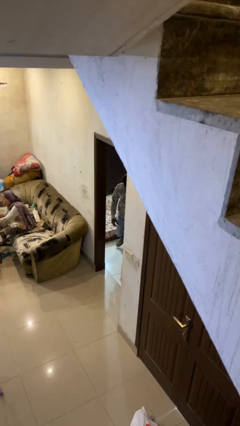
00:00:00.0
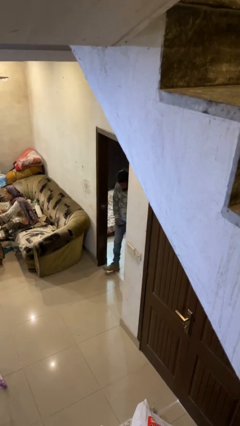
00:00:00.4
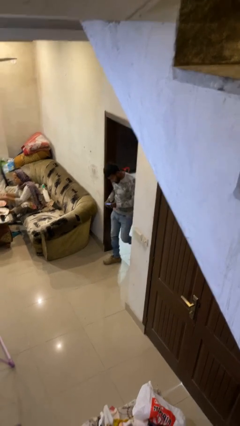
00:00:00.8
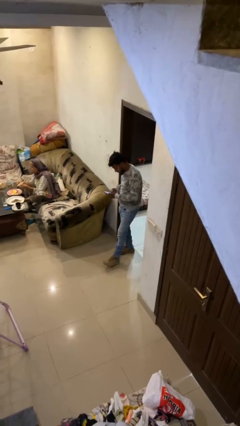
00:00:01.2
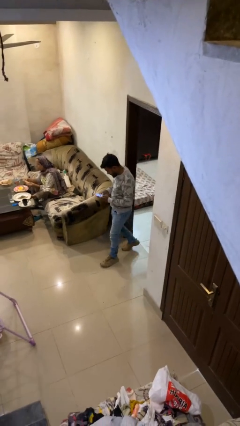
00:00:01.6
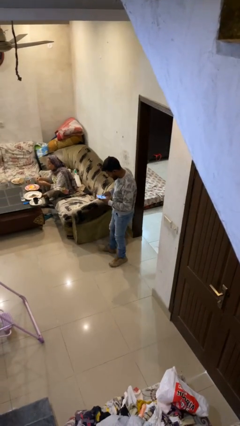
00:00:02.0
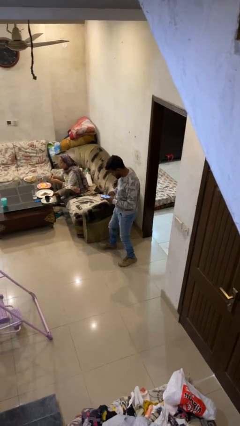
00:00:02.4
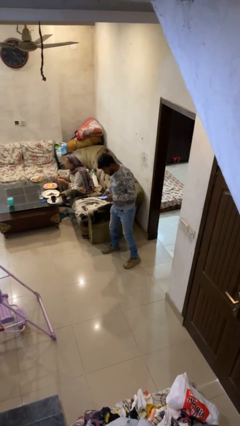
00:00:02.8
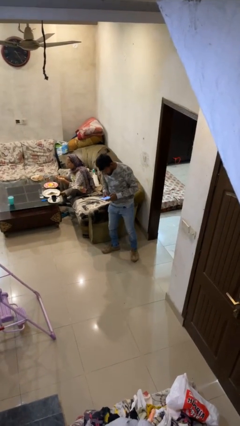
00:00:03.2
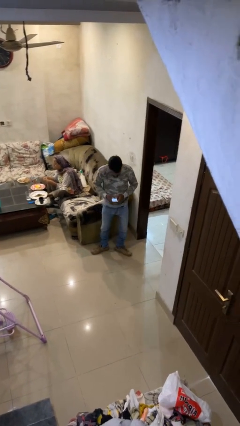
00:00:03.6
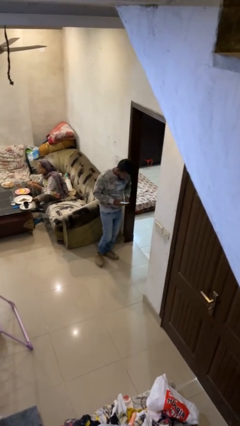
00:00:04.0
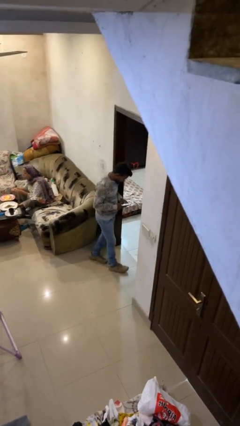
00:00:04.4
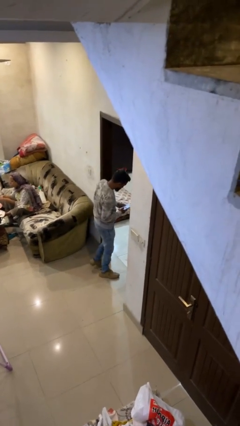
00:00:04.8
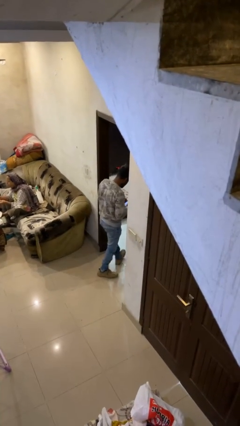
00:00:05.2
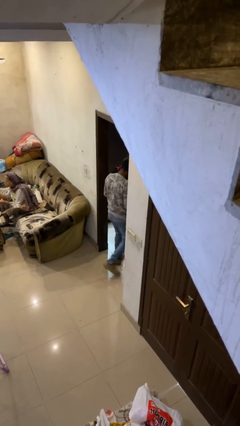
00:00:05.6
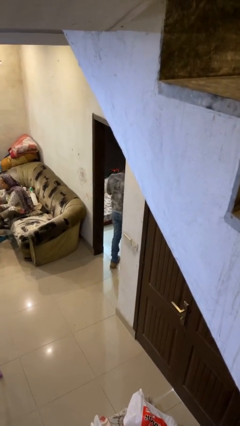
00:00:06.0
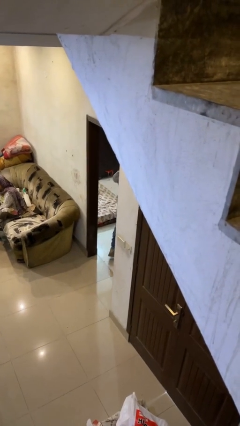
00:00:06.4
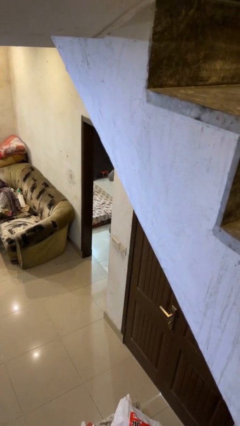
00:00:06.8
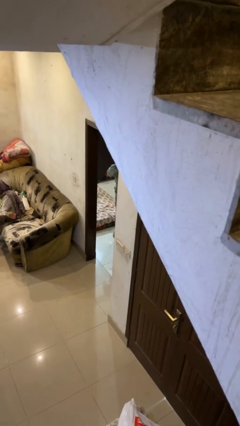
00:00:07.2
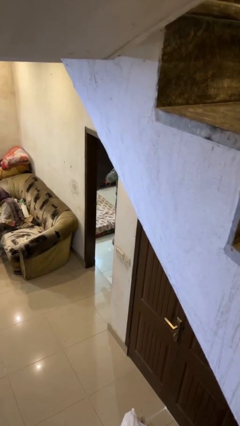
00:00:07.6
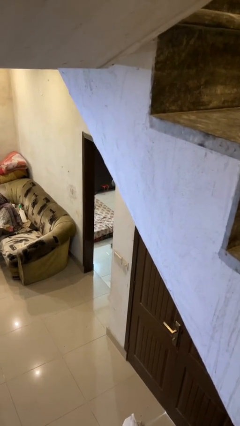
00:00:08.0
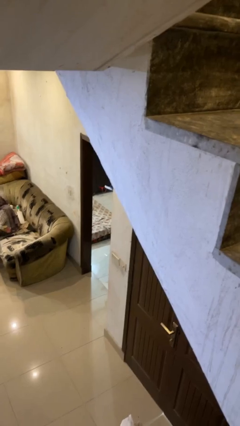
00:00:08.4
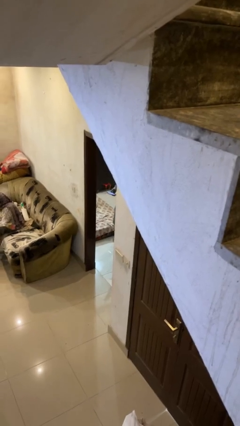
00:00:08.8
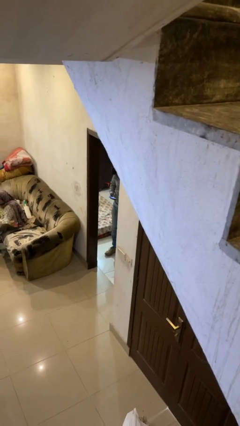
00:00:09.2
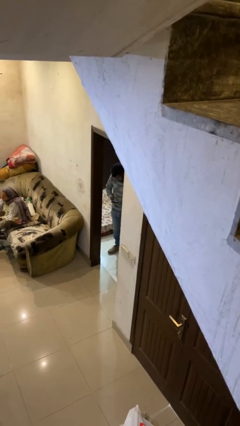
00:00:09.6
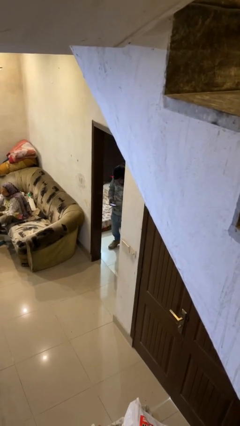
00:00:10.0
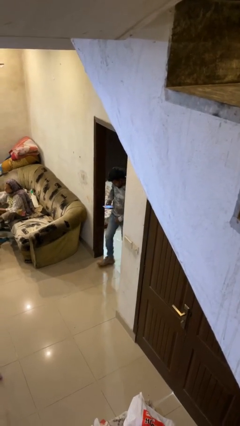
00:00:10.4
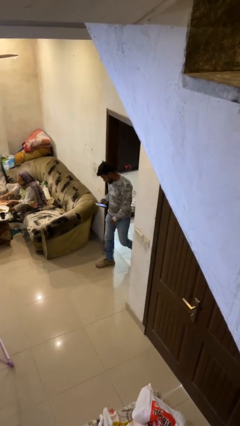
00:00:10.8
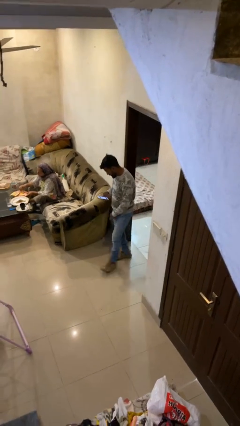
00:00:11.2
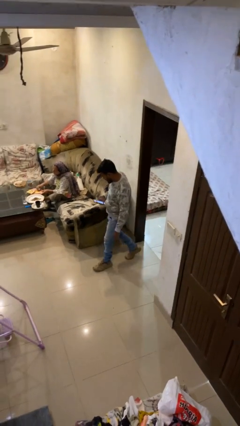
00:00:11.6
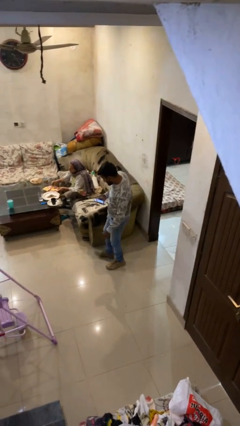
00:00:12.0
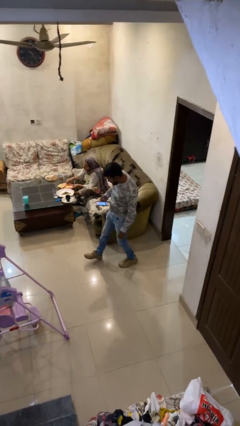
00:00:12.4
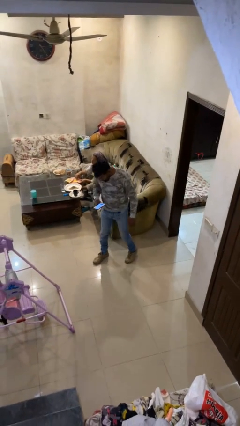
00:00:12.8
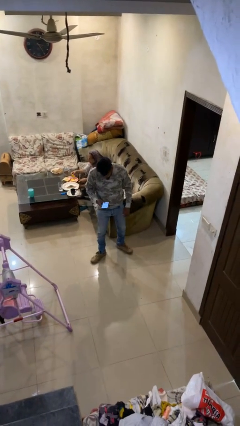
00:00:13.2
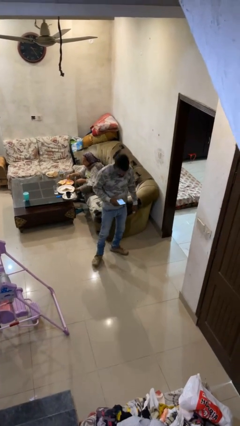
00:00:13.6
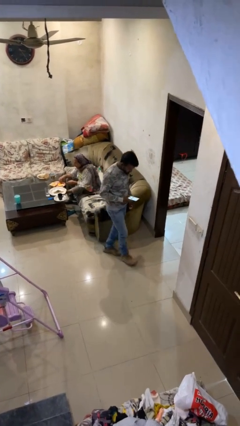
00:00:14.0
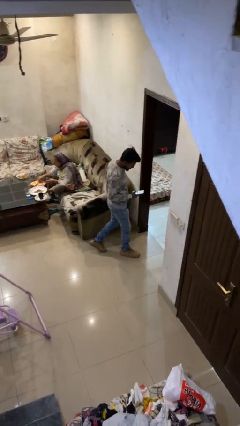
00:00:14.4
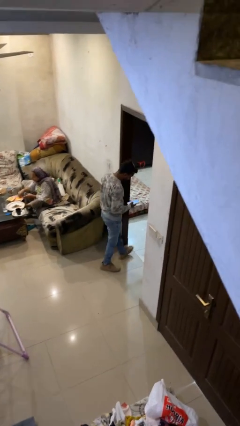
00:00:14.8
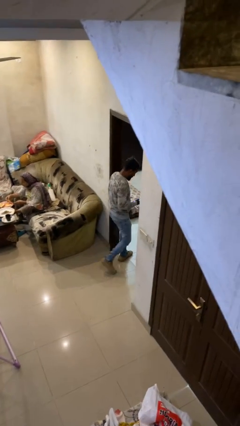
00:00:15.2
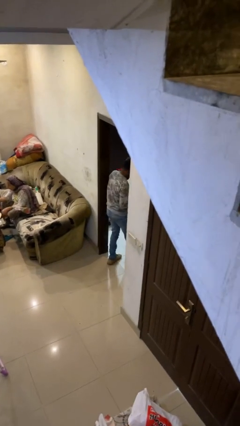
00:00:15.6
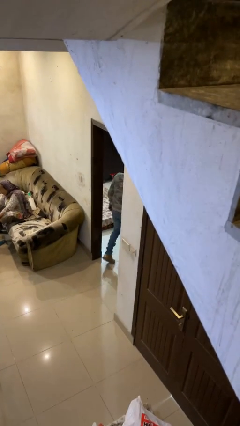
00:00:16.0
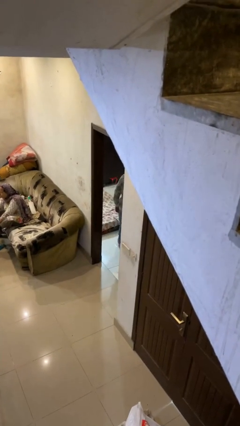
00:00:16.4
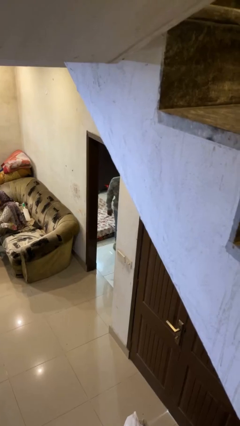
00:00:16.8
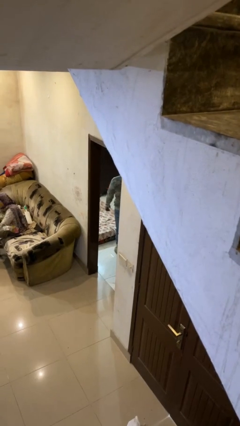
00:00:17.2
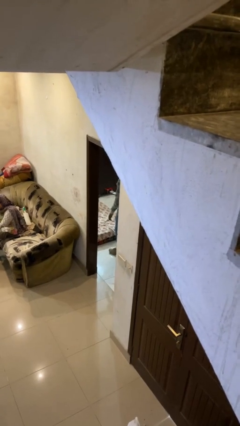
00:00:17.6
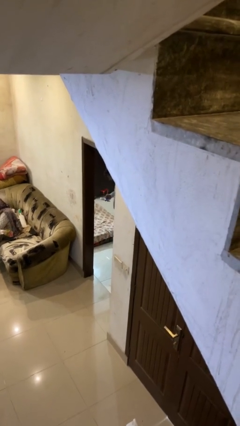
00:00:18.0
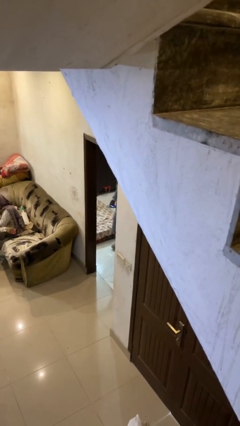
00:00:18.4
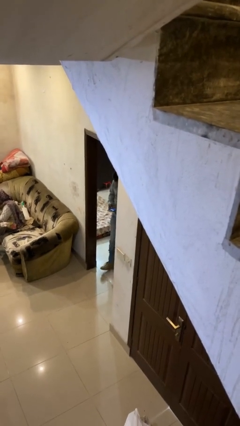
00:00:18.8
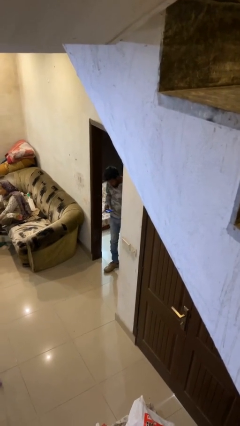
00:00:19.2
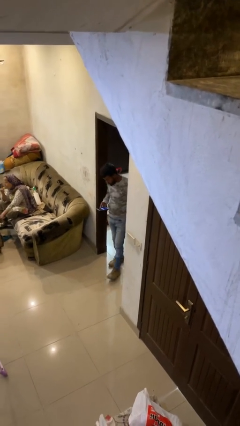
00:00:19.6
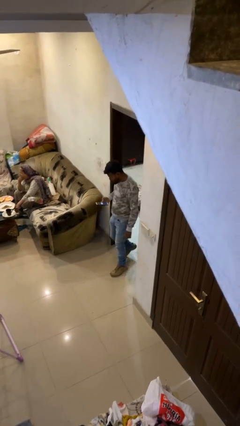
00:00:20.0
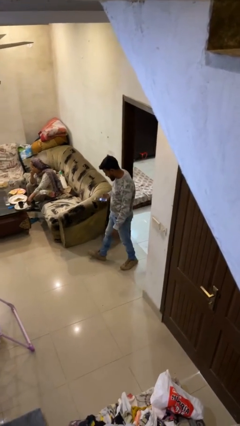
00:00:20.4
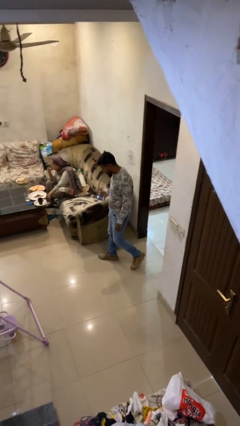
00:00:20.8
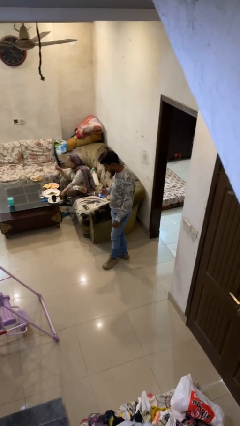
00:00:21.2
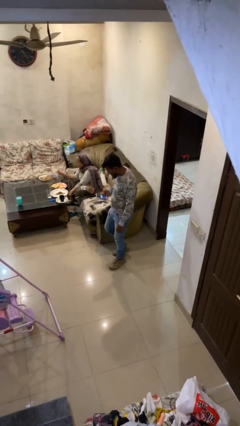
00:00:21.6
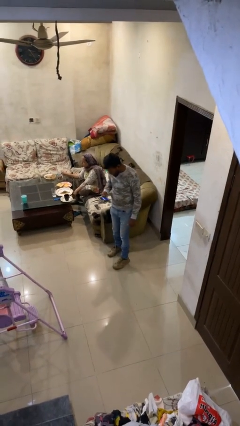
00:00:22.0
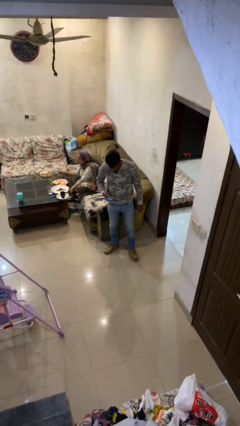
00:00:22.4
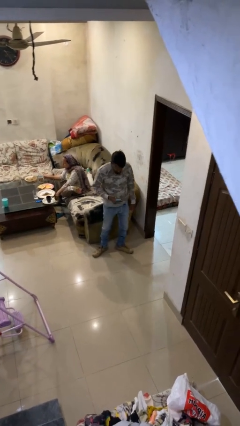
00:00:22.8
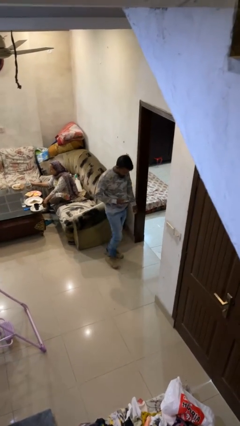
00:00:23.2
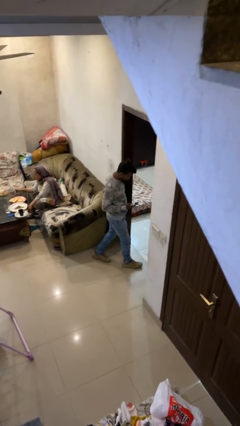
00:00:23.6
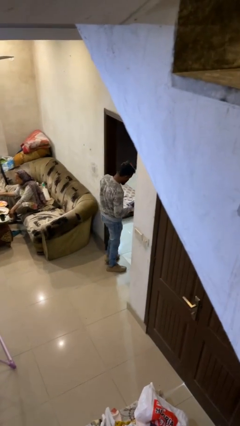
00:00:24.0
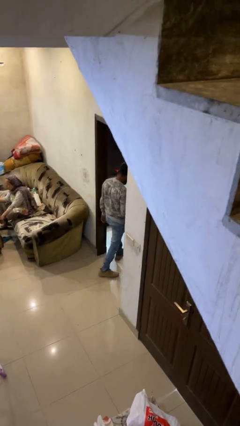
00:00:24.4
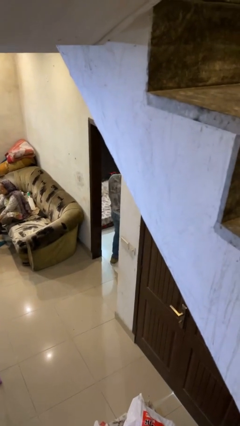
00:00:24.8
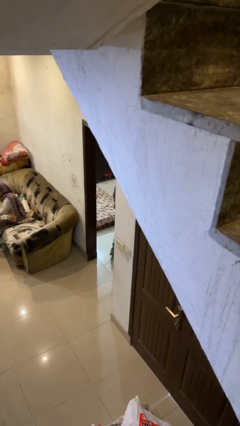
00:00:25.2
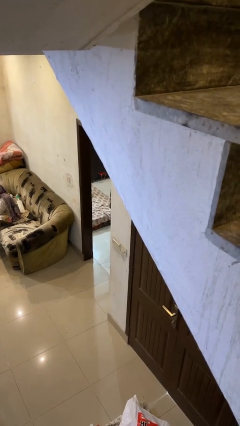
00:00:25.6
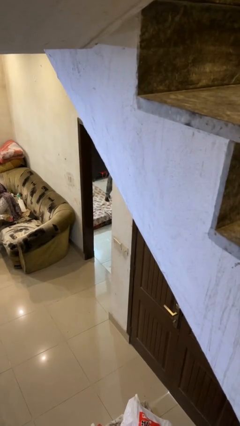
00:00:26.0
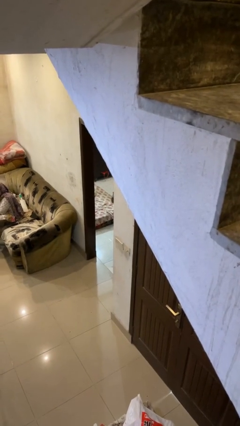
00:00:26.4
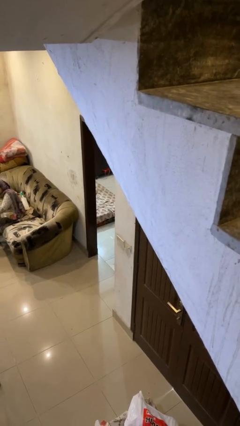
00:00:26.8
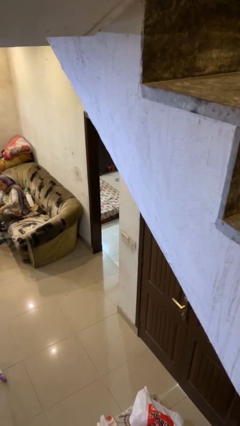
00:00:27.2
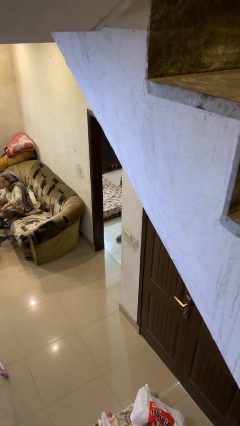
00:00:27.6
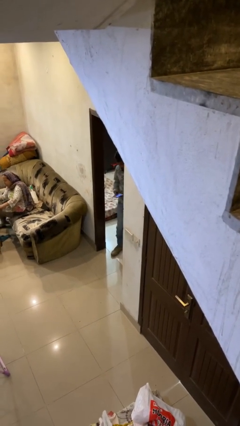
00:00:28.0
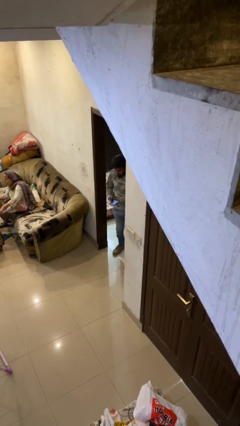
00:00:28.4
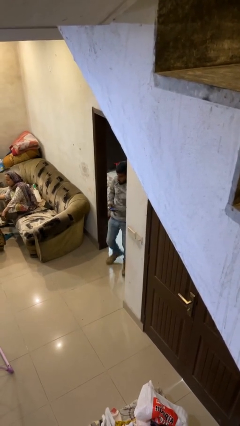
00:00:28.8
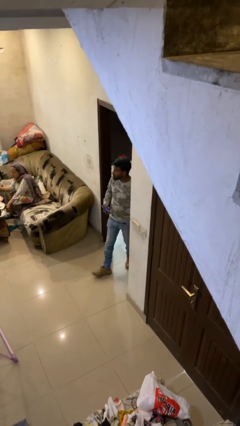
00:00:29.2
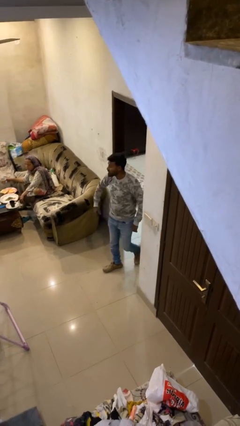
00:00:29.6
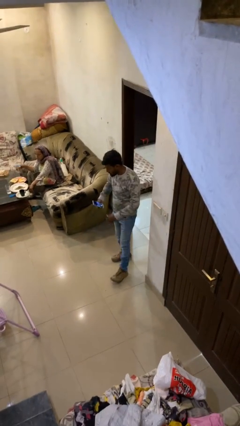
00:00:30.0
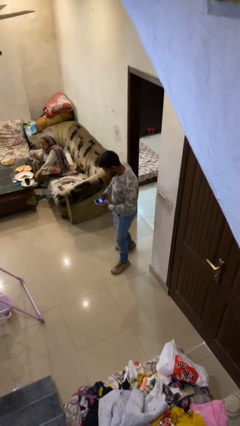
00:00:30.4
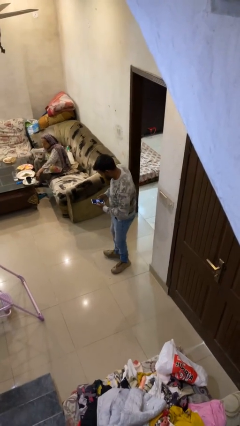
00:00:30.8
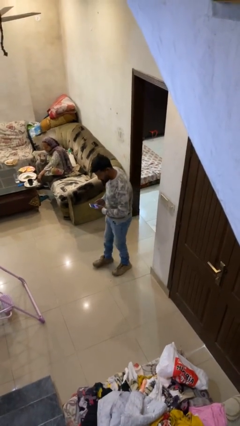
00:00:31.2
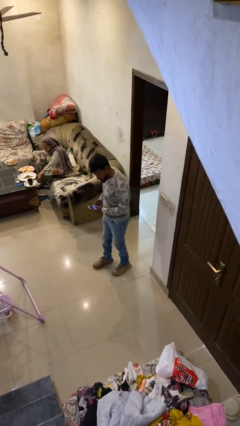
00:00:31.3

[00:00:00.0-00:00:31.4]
person texts on phone

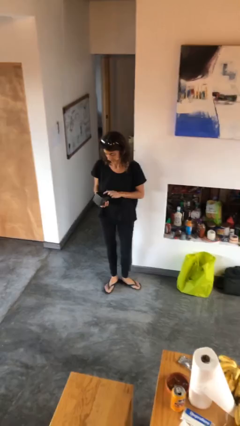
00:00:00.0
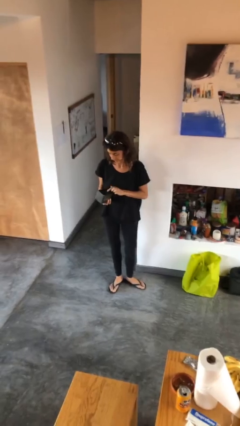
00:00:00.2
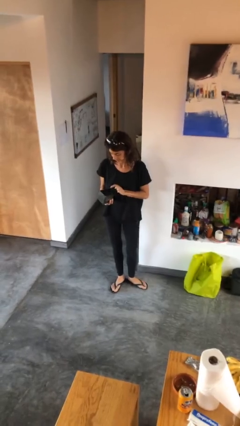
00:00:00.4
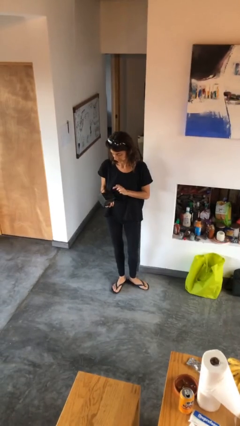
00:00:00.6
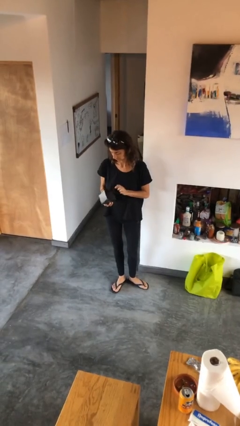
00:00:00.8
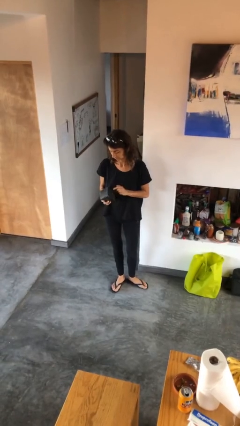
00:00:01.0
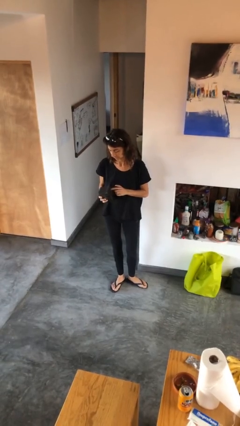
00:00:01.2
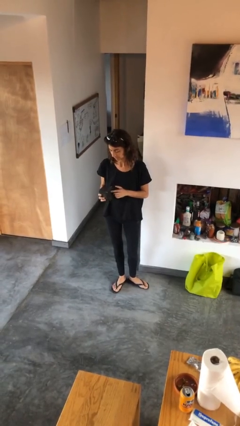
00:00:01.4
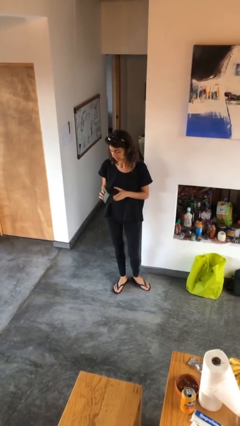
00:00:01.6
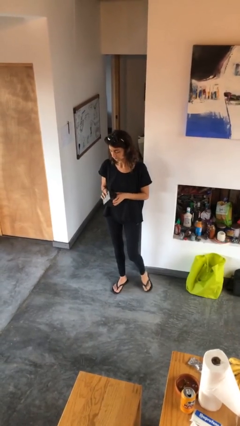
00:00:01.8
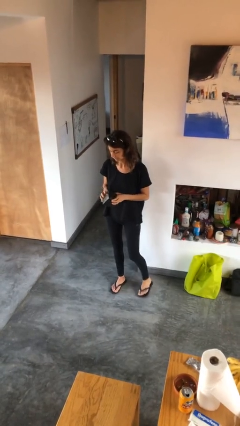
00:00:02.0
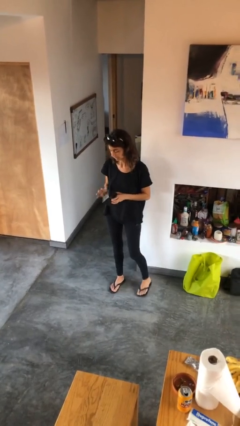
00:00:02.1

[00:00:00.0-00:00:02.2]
person taps object with finger

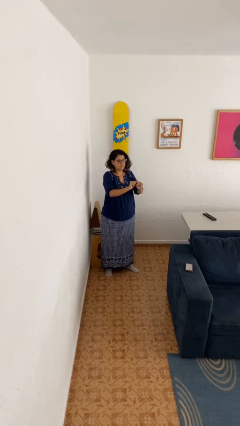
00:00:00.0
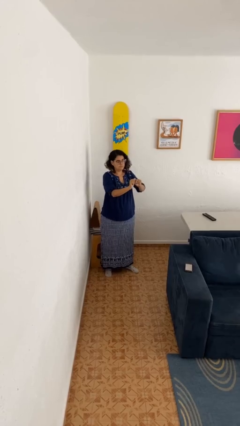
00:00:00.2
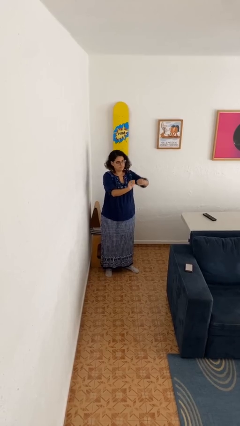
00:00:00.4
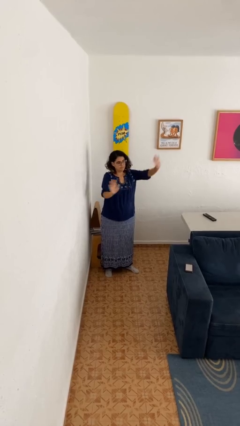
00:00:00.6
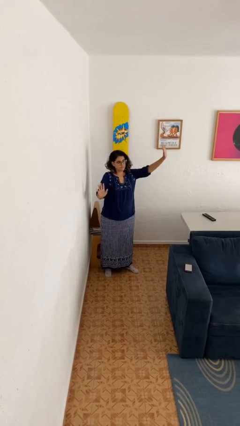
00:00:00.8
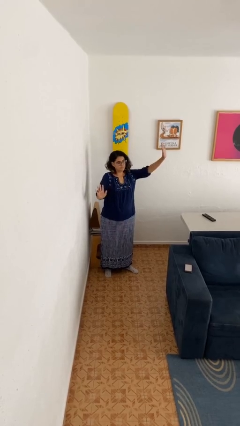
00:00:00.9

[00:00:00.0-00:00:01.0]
person gestures zoom in
